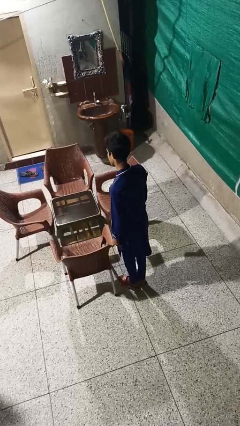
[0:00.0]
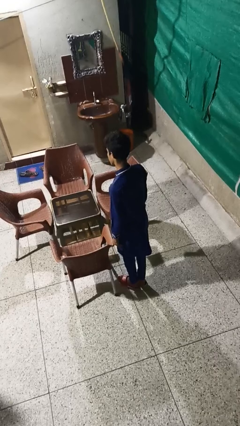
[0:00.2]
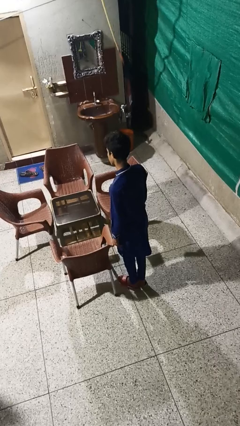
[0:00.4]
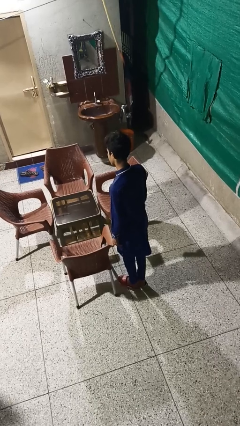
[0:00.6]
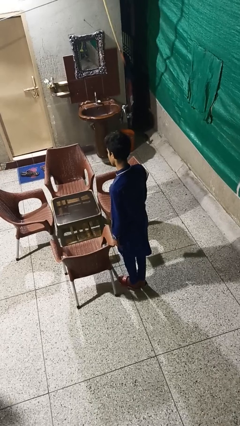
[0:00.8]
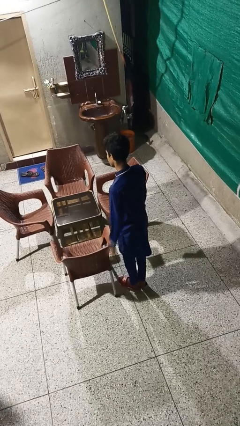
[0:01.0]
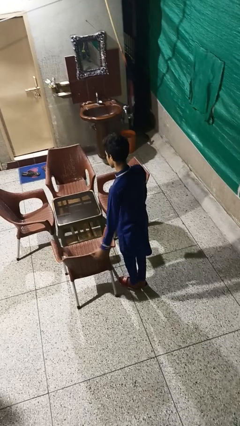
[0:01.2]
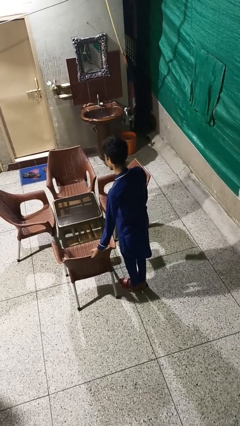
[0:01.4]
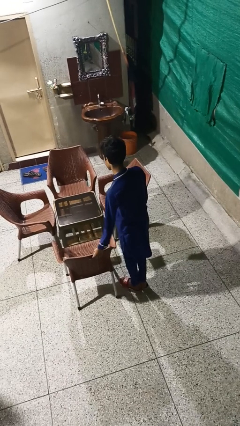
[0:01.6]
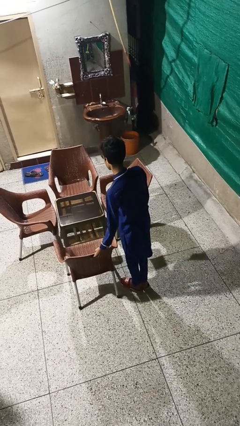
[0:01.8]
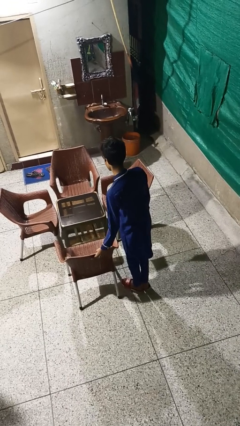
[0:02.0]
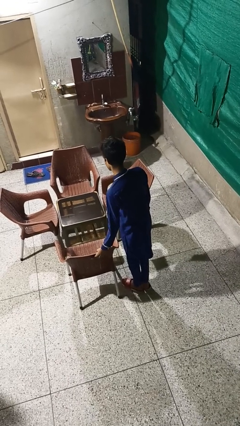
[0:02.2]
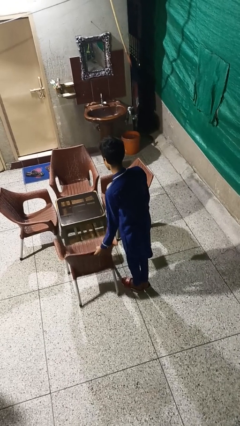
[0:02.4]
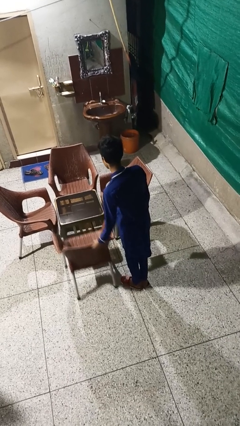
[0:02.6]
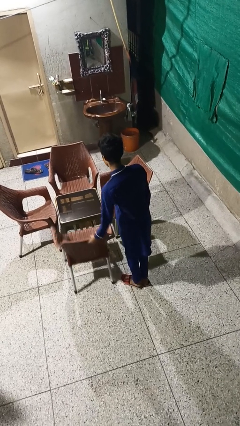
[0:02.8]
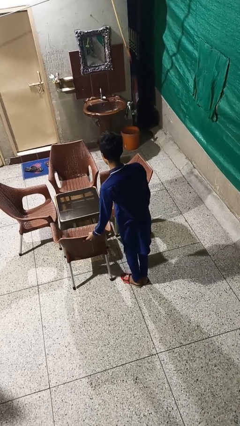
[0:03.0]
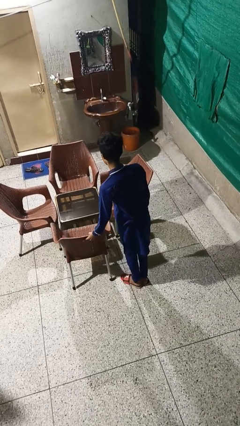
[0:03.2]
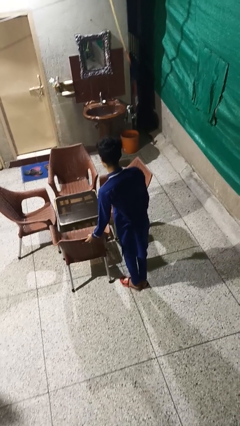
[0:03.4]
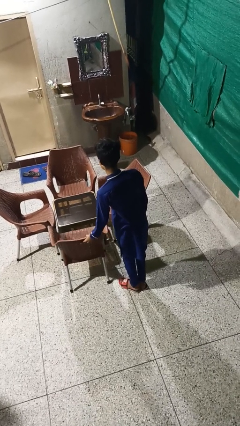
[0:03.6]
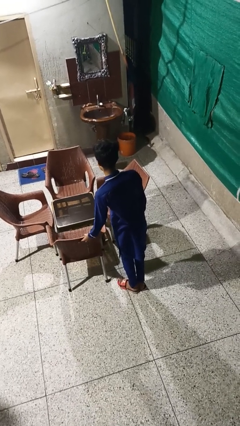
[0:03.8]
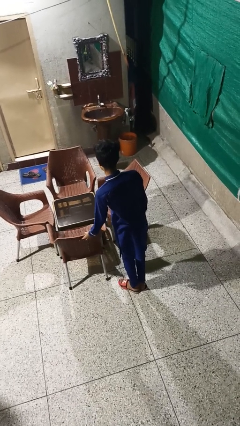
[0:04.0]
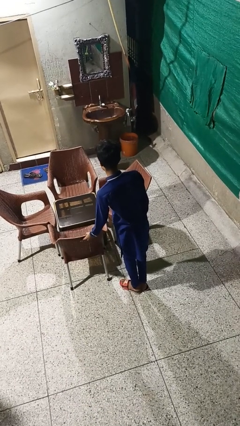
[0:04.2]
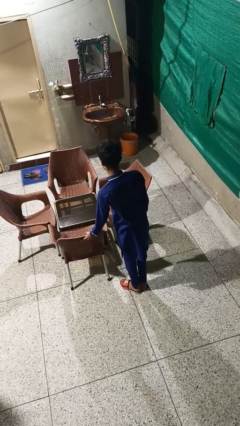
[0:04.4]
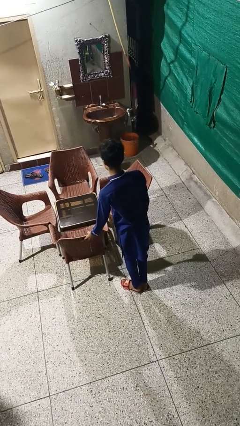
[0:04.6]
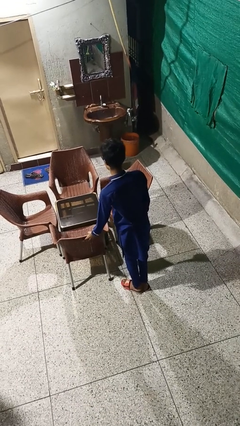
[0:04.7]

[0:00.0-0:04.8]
person pushes in chair

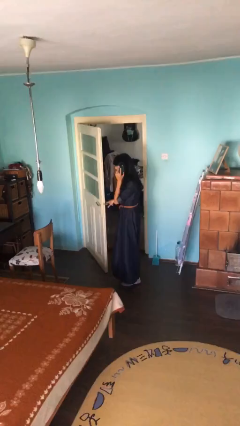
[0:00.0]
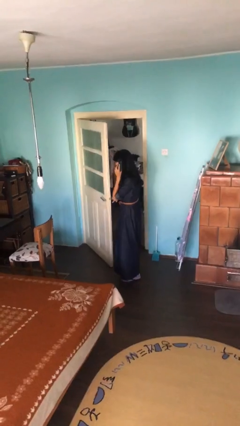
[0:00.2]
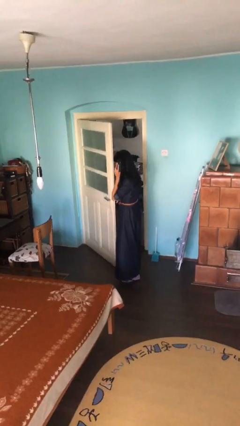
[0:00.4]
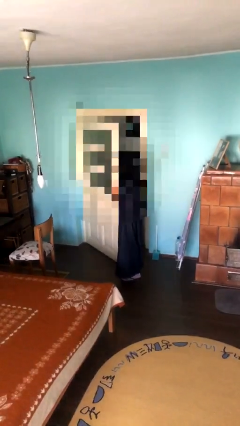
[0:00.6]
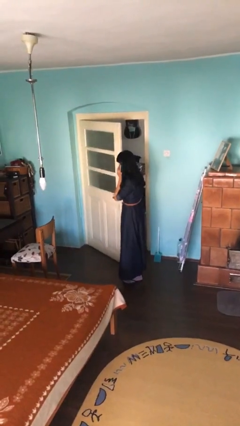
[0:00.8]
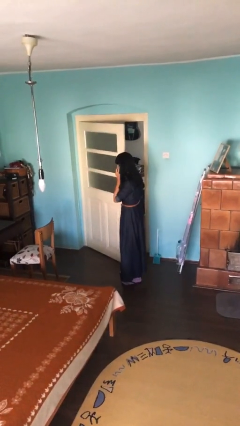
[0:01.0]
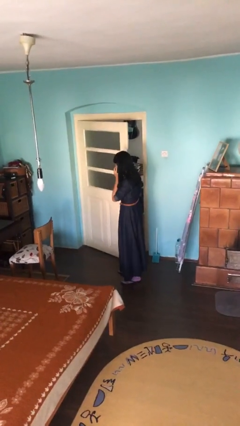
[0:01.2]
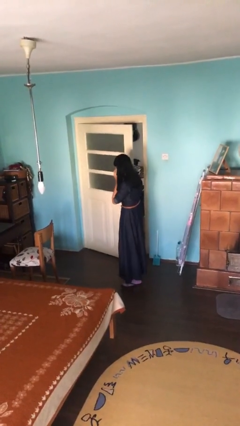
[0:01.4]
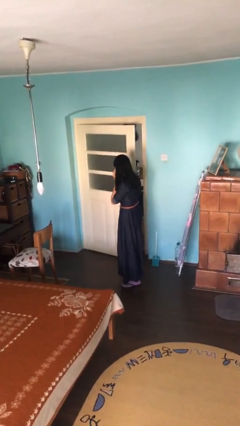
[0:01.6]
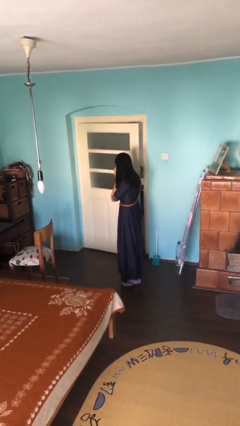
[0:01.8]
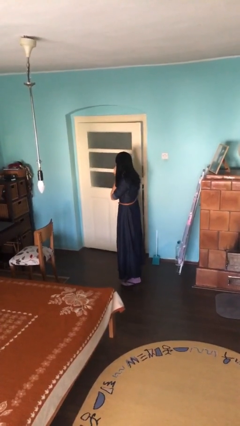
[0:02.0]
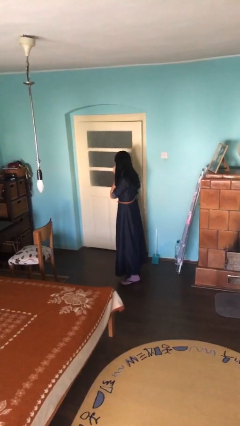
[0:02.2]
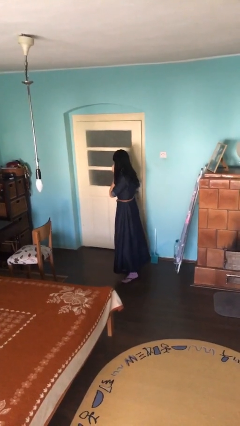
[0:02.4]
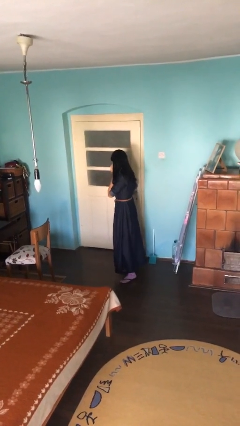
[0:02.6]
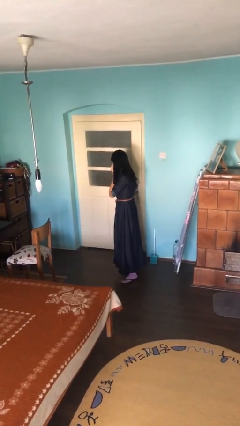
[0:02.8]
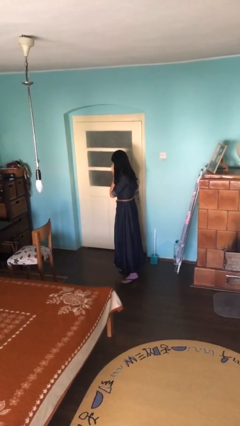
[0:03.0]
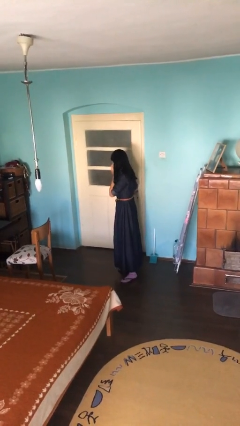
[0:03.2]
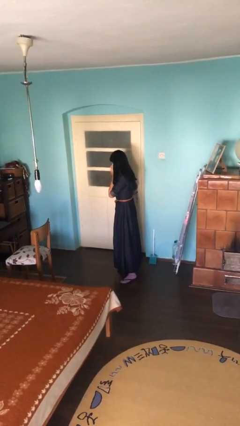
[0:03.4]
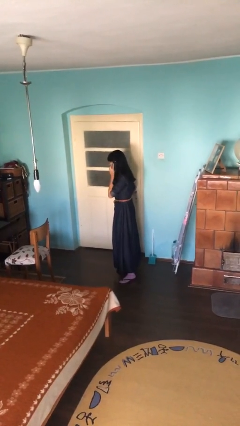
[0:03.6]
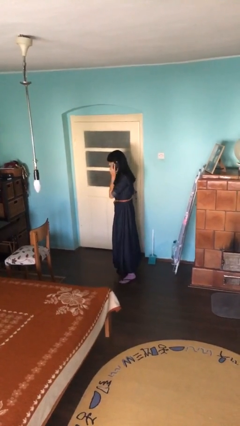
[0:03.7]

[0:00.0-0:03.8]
person closes facility door

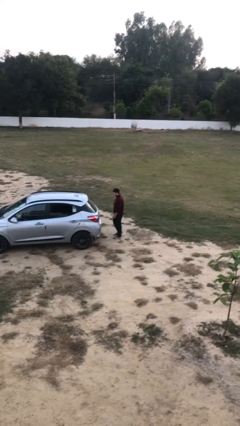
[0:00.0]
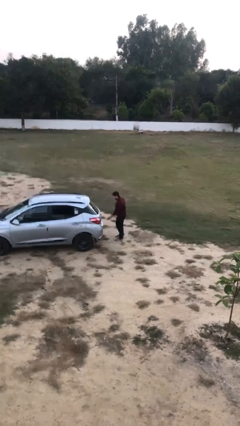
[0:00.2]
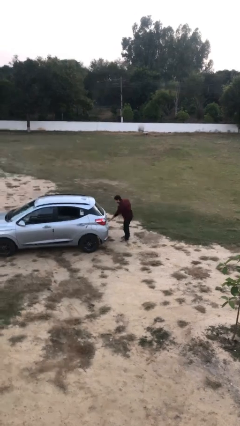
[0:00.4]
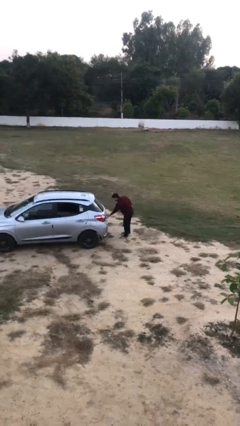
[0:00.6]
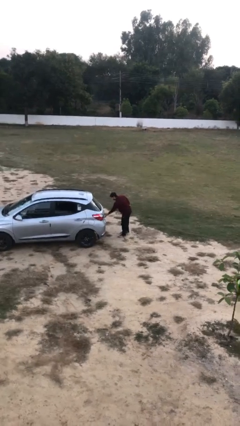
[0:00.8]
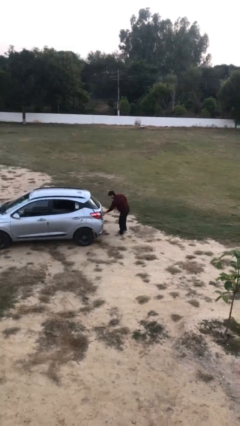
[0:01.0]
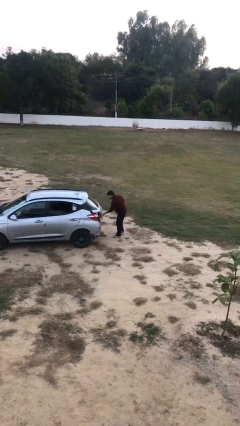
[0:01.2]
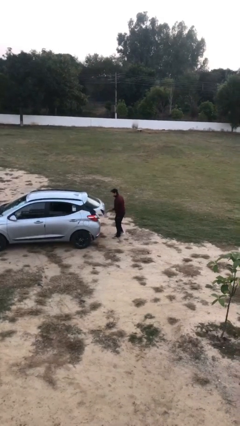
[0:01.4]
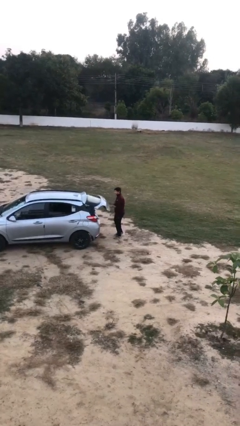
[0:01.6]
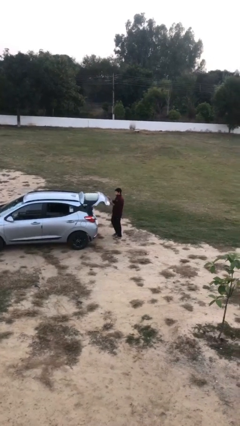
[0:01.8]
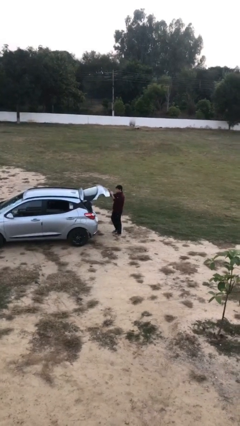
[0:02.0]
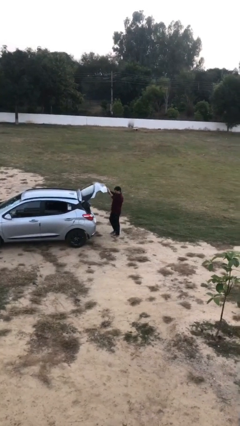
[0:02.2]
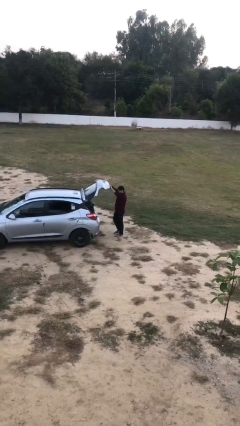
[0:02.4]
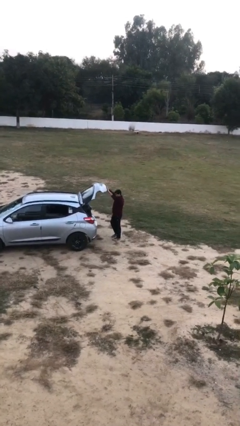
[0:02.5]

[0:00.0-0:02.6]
person opens car trunk

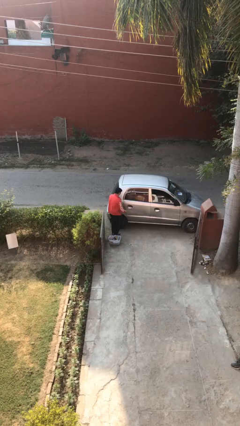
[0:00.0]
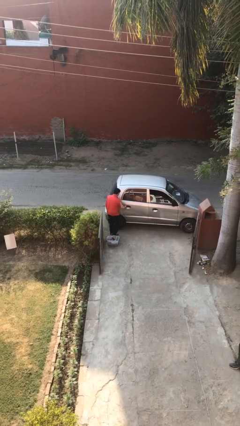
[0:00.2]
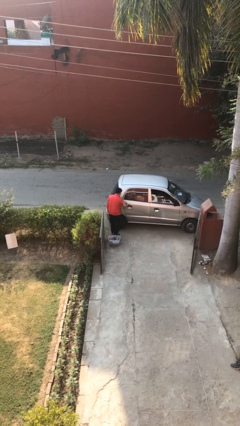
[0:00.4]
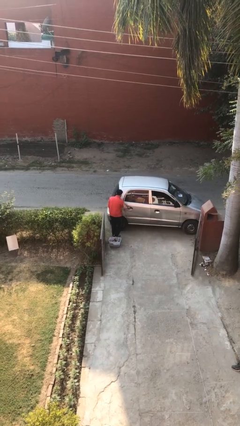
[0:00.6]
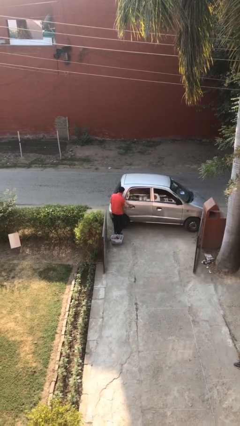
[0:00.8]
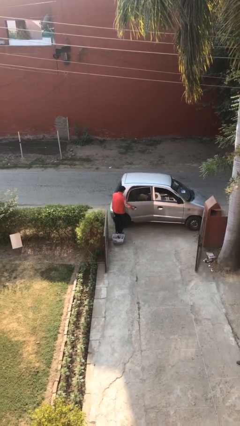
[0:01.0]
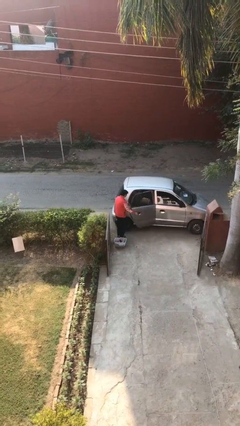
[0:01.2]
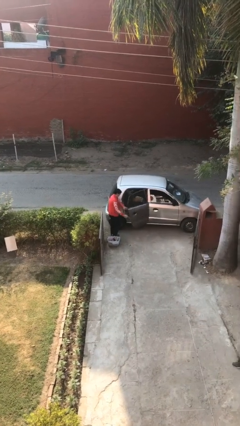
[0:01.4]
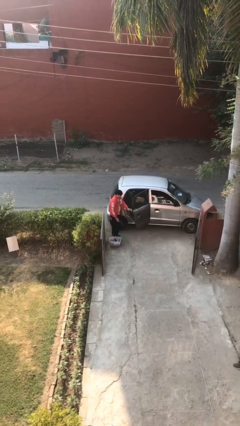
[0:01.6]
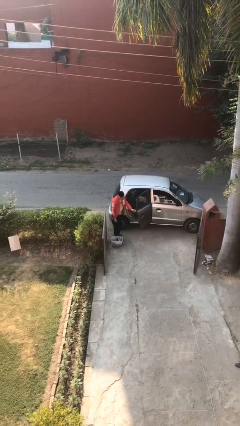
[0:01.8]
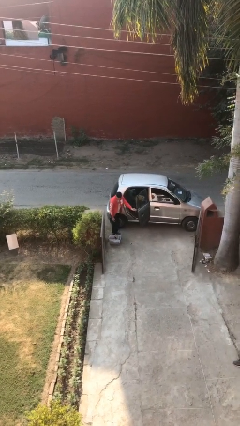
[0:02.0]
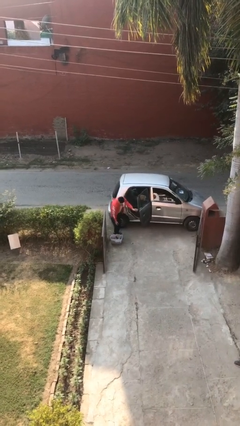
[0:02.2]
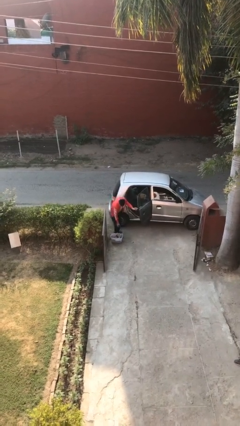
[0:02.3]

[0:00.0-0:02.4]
person opens car door

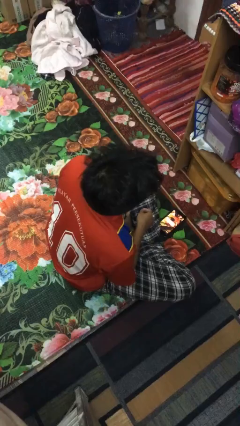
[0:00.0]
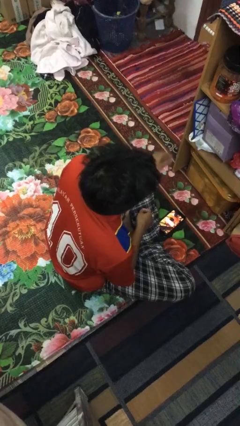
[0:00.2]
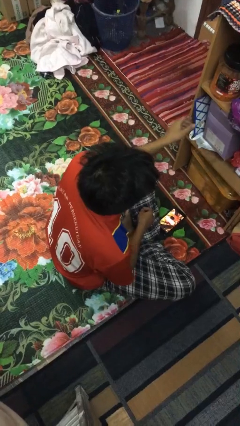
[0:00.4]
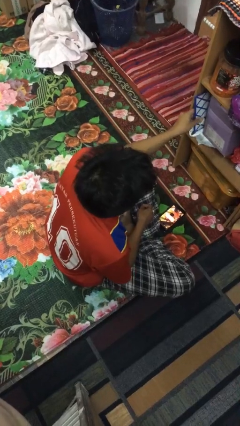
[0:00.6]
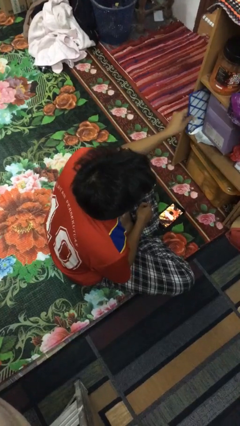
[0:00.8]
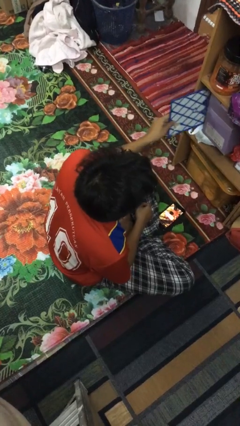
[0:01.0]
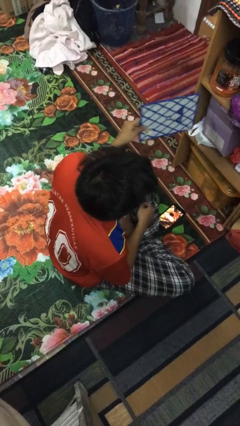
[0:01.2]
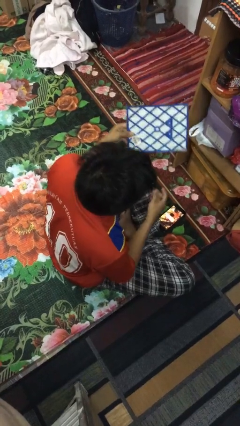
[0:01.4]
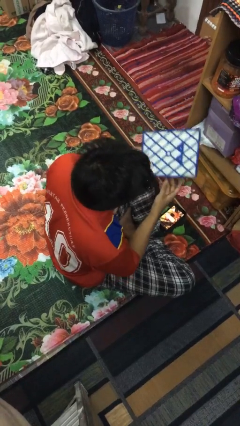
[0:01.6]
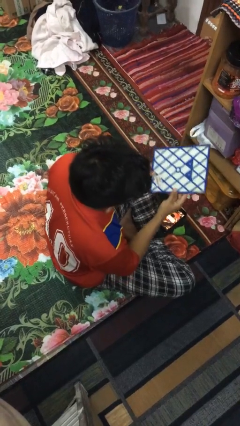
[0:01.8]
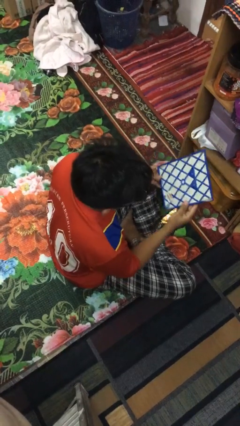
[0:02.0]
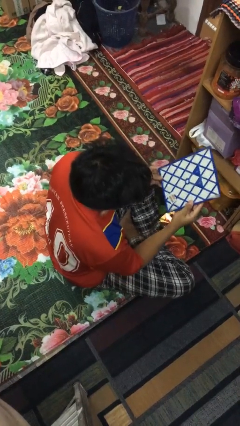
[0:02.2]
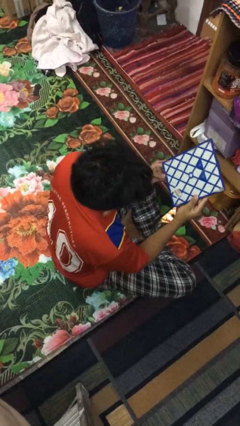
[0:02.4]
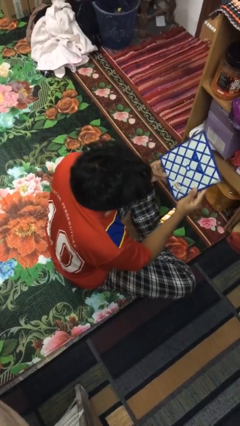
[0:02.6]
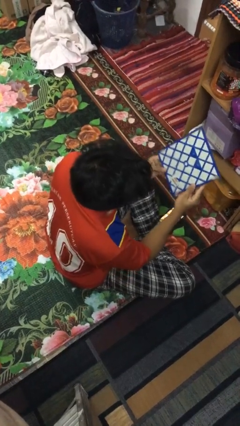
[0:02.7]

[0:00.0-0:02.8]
person picks up object from cabinet

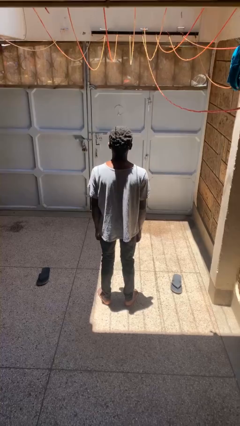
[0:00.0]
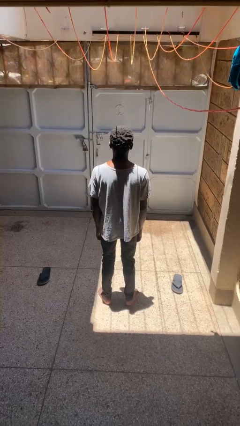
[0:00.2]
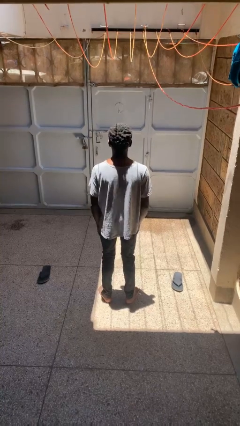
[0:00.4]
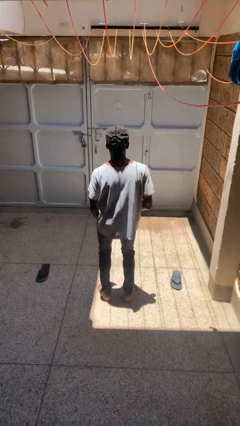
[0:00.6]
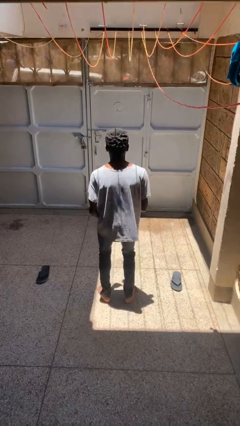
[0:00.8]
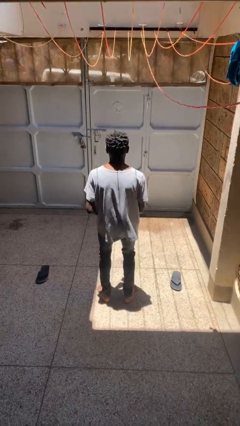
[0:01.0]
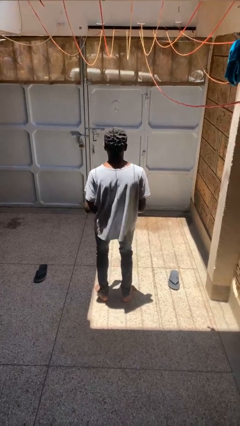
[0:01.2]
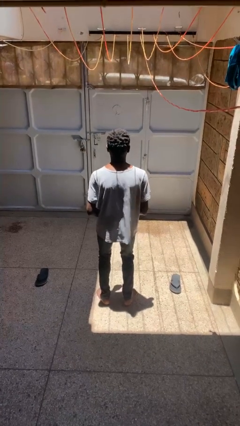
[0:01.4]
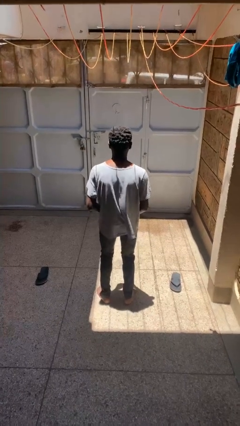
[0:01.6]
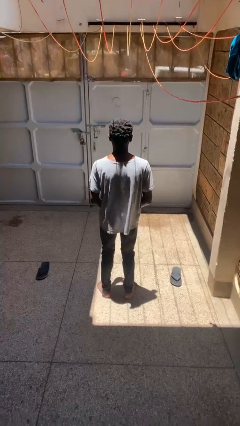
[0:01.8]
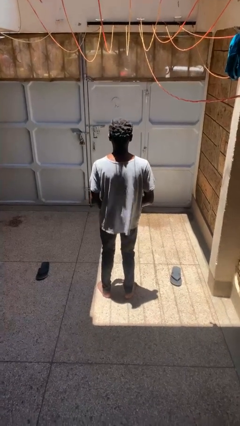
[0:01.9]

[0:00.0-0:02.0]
person dances in place
